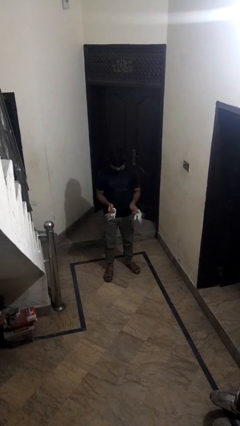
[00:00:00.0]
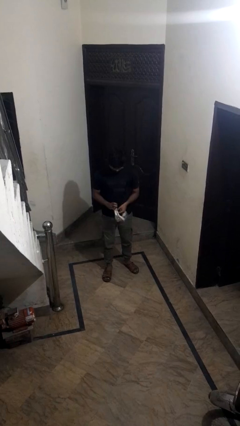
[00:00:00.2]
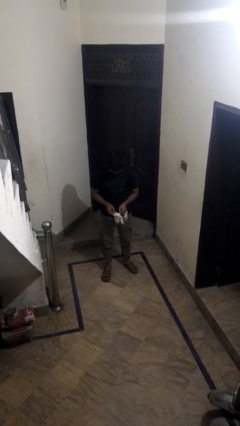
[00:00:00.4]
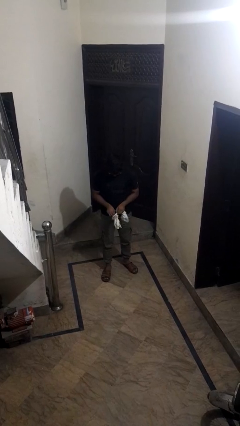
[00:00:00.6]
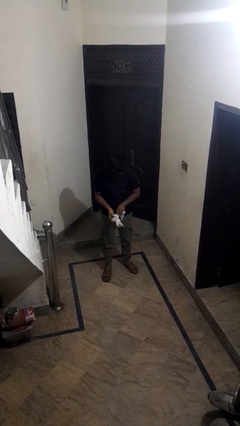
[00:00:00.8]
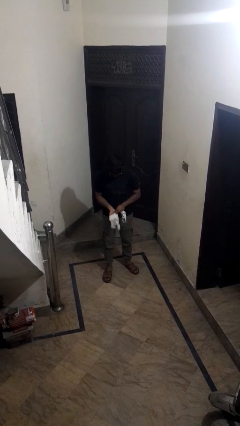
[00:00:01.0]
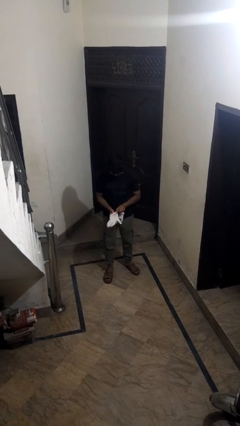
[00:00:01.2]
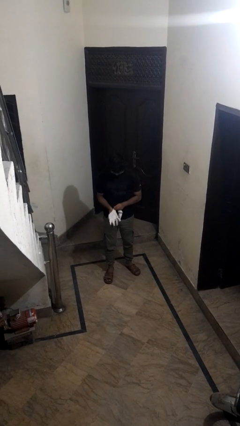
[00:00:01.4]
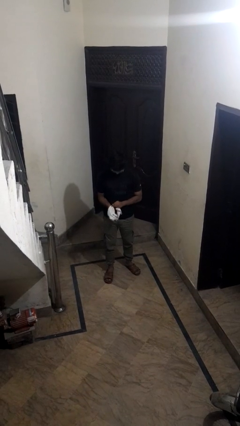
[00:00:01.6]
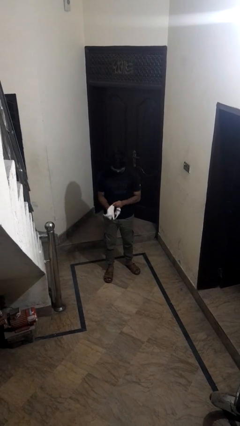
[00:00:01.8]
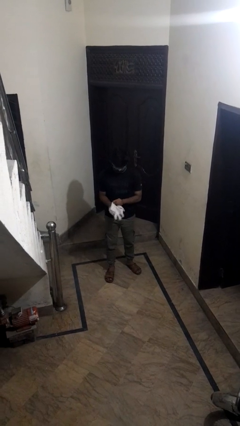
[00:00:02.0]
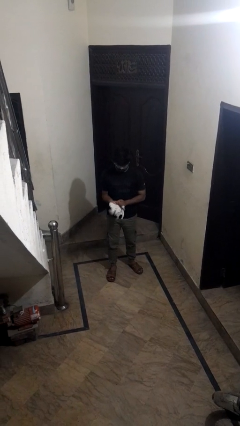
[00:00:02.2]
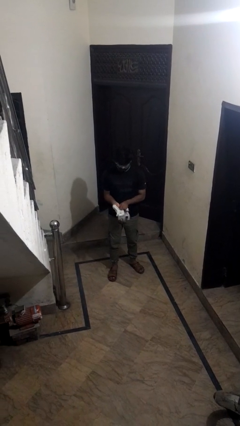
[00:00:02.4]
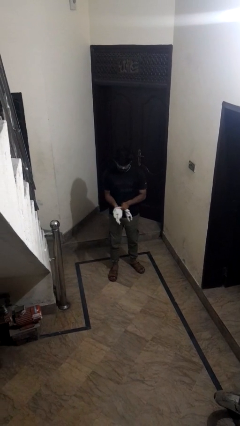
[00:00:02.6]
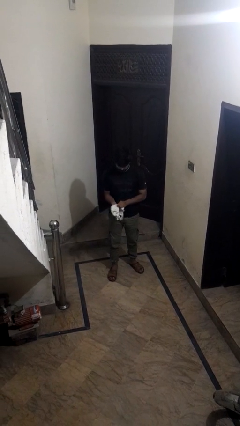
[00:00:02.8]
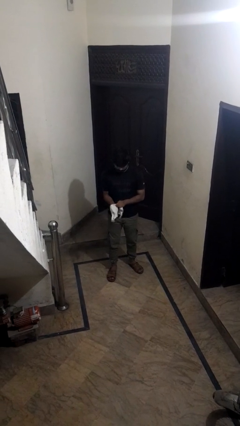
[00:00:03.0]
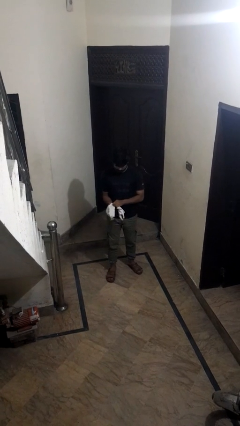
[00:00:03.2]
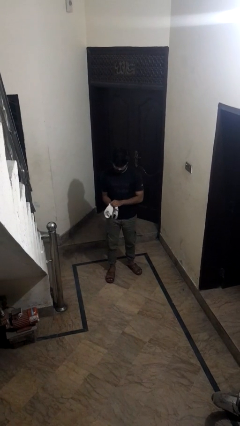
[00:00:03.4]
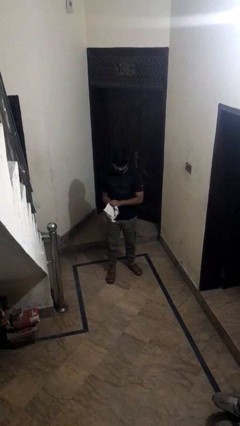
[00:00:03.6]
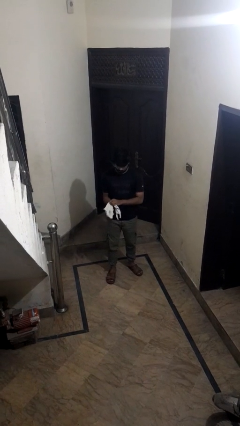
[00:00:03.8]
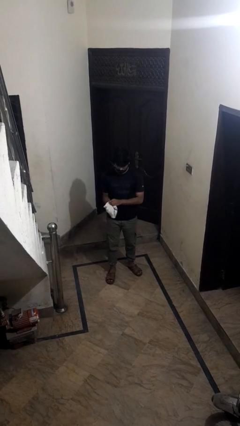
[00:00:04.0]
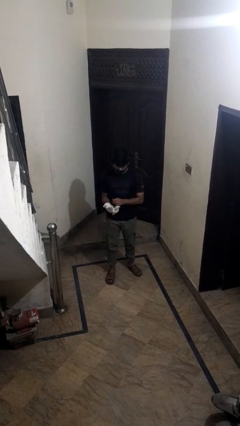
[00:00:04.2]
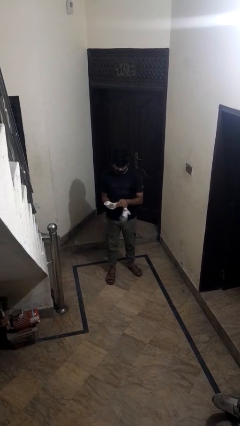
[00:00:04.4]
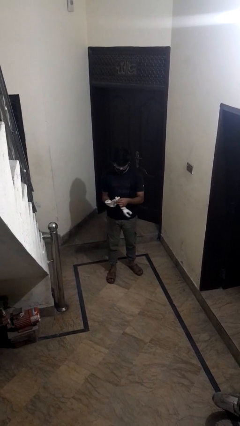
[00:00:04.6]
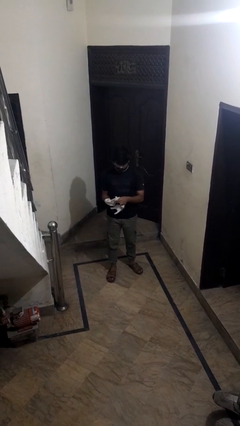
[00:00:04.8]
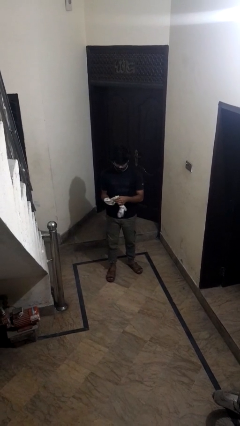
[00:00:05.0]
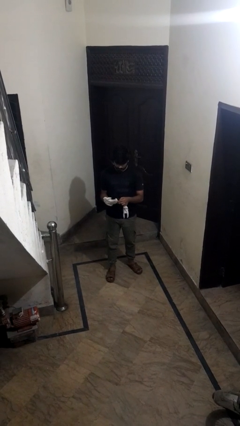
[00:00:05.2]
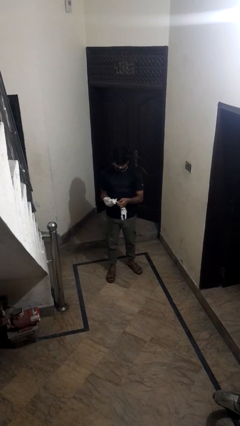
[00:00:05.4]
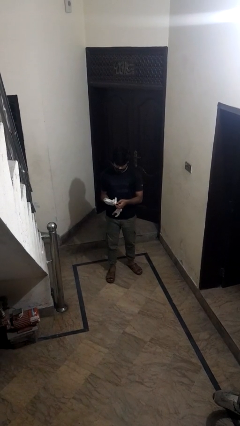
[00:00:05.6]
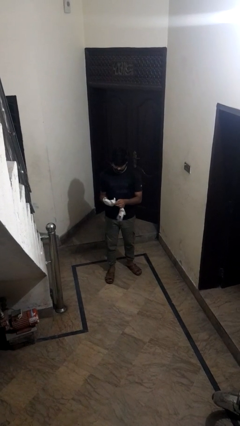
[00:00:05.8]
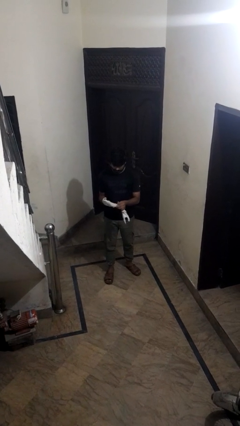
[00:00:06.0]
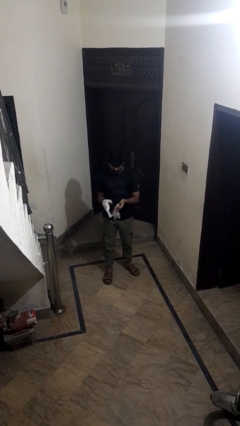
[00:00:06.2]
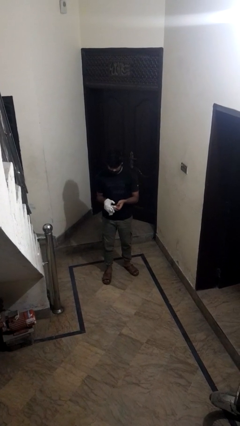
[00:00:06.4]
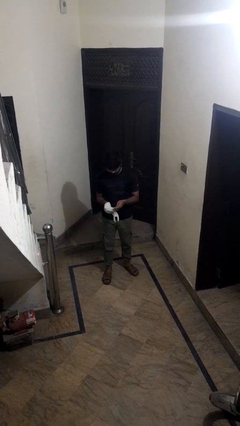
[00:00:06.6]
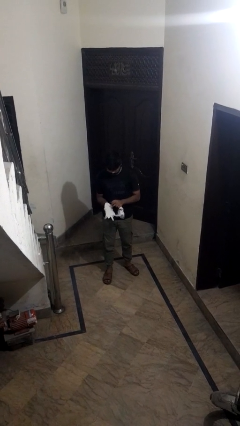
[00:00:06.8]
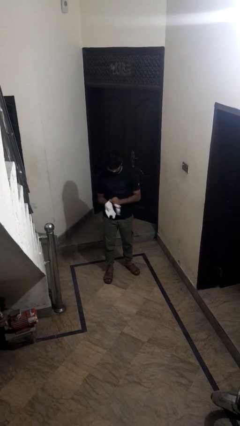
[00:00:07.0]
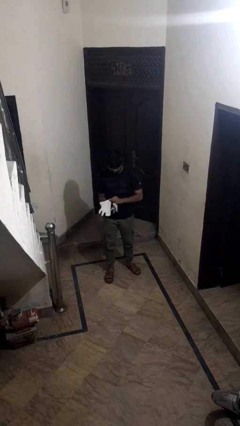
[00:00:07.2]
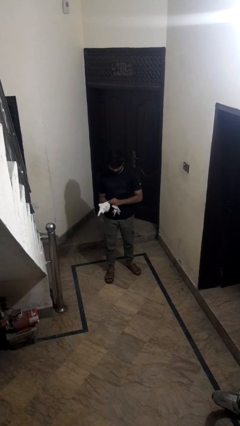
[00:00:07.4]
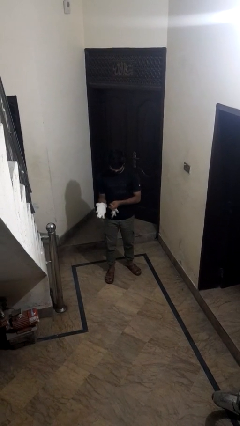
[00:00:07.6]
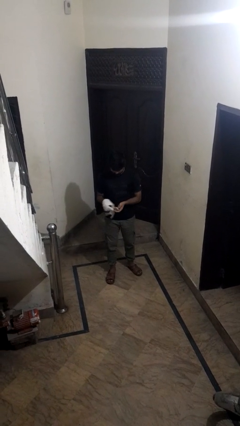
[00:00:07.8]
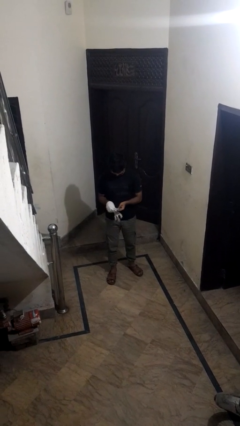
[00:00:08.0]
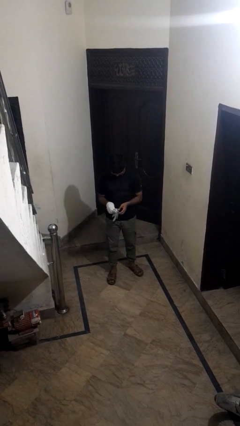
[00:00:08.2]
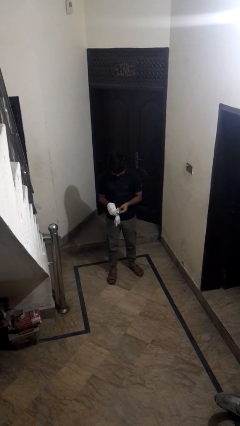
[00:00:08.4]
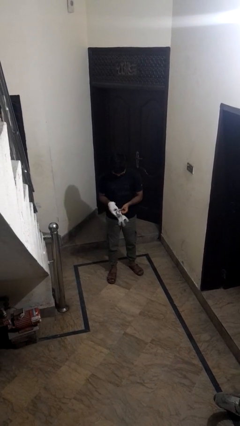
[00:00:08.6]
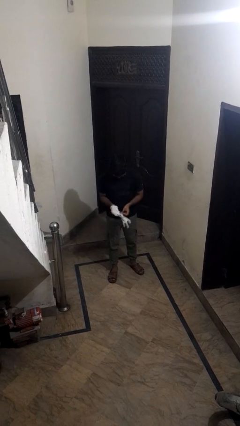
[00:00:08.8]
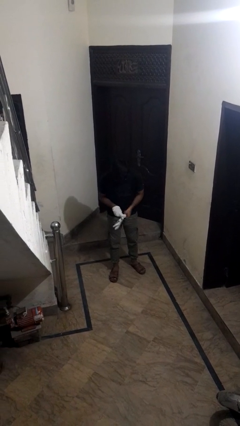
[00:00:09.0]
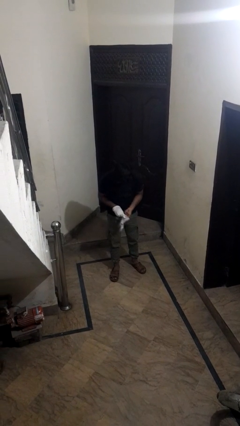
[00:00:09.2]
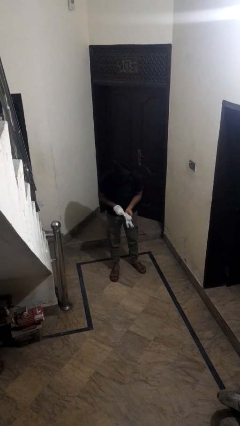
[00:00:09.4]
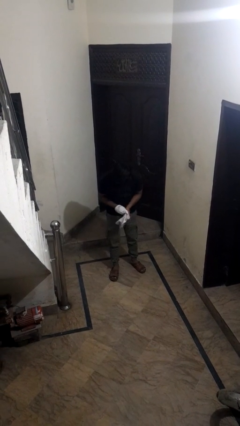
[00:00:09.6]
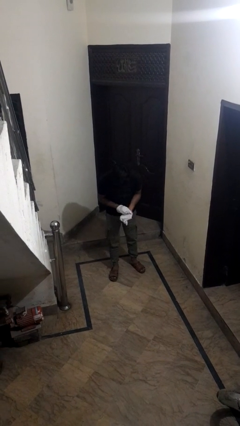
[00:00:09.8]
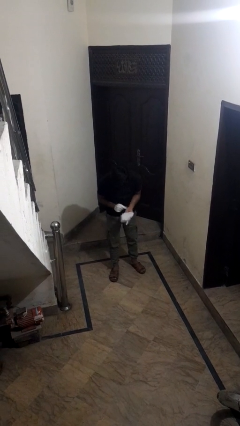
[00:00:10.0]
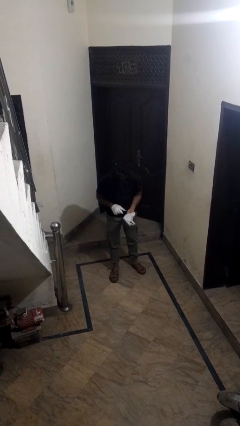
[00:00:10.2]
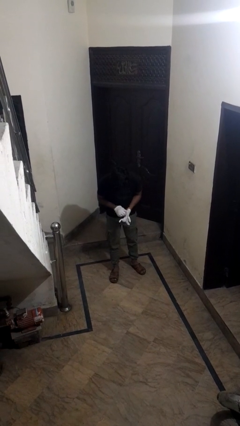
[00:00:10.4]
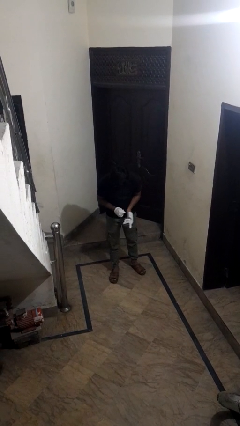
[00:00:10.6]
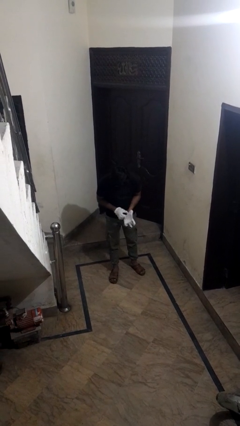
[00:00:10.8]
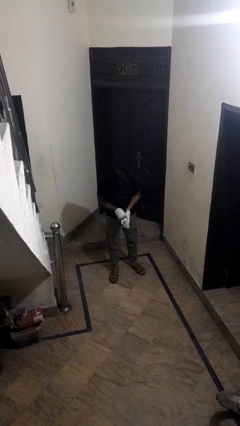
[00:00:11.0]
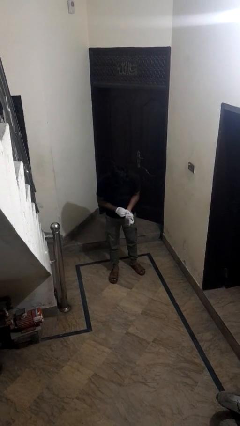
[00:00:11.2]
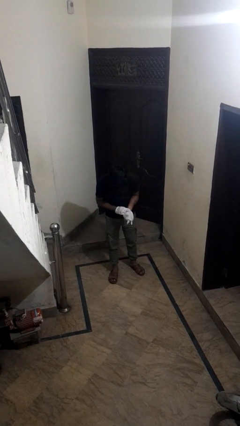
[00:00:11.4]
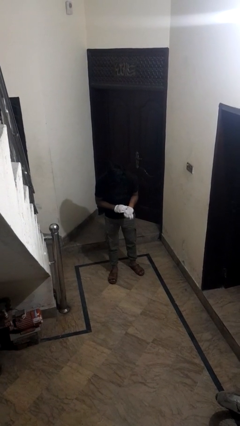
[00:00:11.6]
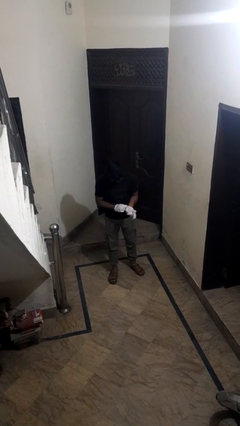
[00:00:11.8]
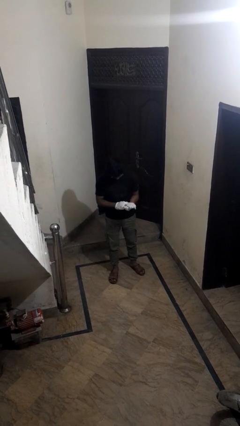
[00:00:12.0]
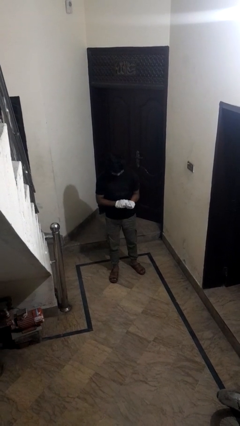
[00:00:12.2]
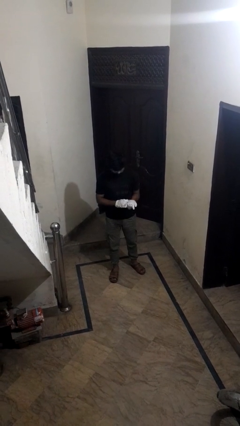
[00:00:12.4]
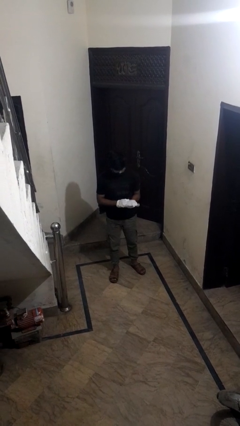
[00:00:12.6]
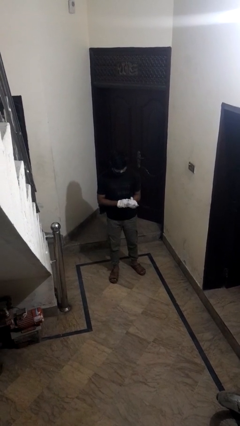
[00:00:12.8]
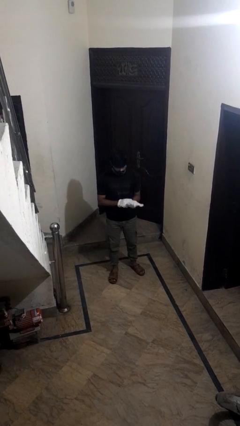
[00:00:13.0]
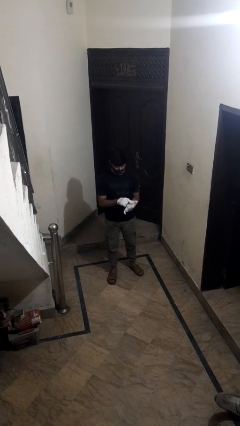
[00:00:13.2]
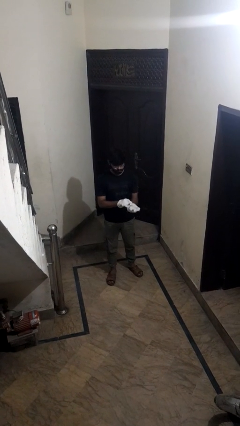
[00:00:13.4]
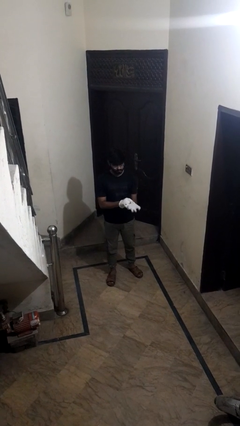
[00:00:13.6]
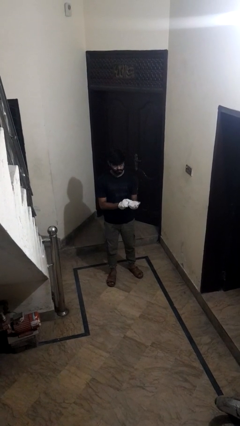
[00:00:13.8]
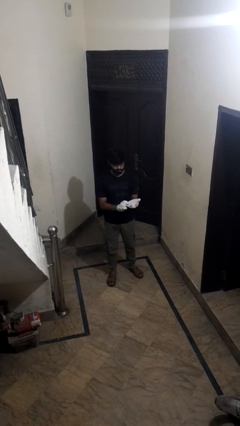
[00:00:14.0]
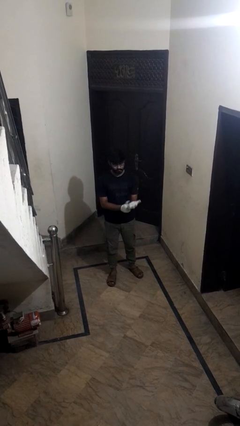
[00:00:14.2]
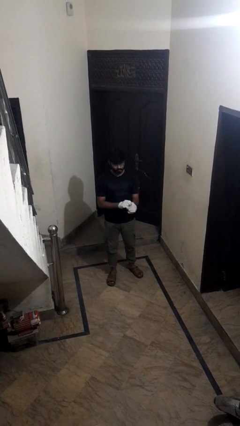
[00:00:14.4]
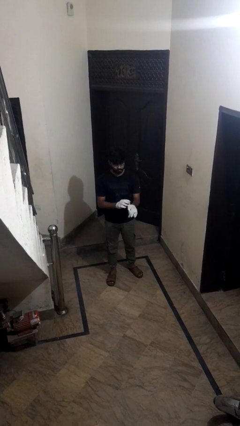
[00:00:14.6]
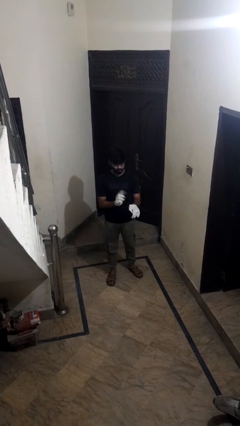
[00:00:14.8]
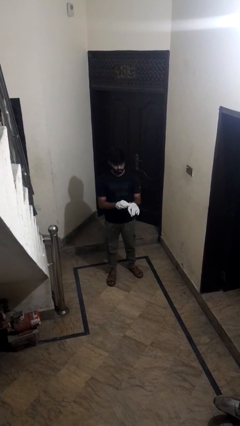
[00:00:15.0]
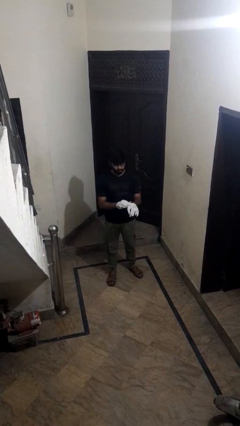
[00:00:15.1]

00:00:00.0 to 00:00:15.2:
person puts on gloves

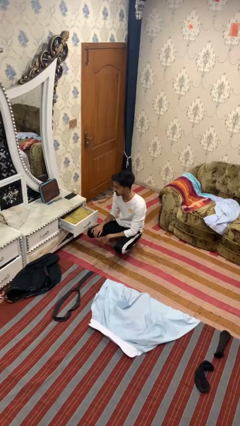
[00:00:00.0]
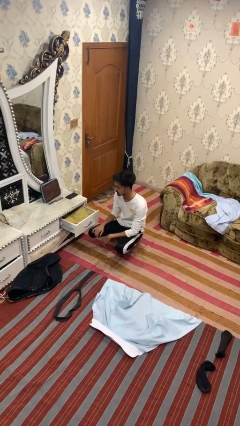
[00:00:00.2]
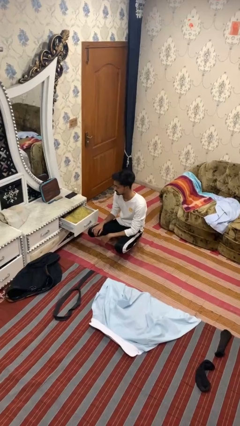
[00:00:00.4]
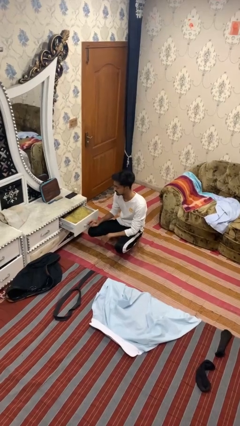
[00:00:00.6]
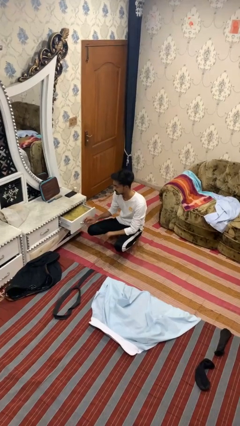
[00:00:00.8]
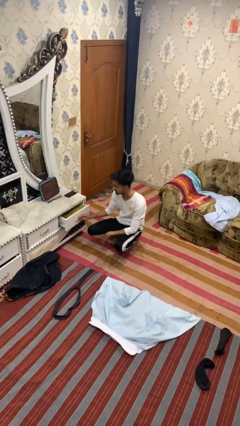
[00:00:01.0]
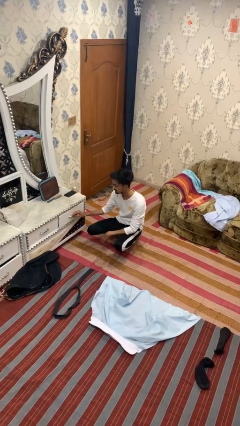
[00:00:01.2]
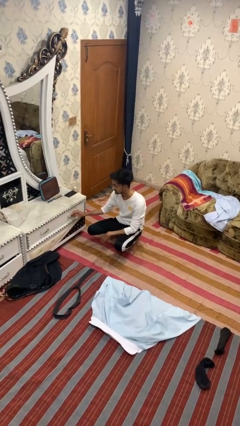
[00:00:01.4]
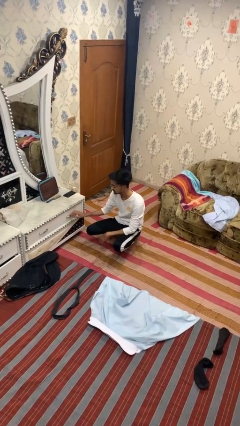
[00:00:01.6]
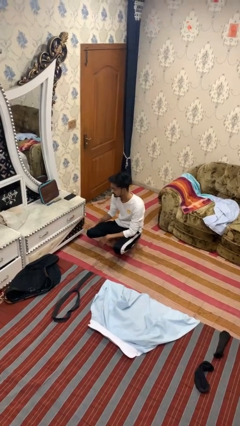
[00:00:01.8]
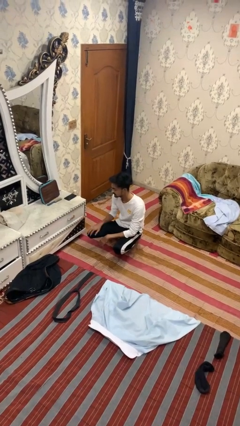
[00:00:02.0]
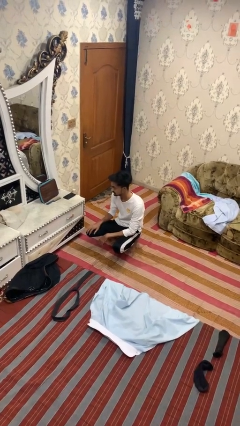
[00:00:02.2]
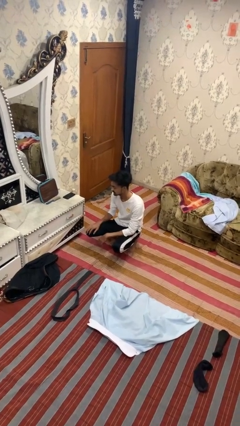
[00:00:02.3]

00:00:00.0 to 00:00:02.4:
person closes dresser drawer

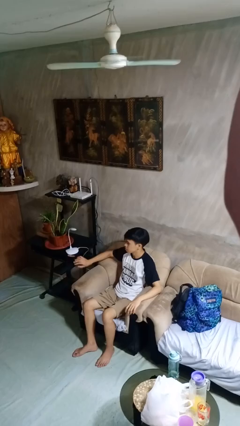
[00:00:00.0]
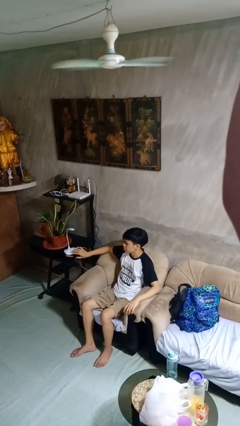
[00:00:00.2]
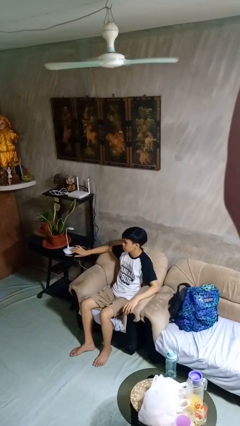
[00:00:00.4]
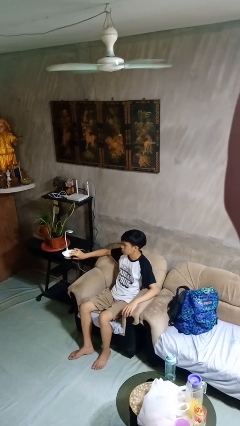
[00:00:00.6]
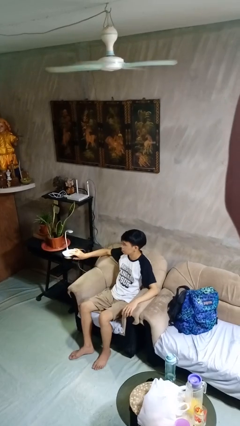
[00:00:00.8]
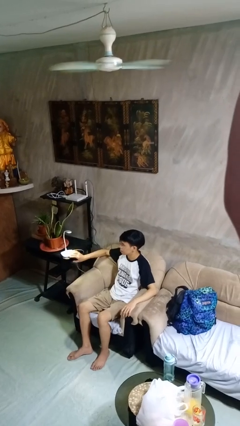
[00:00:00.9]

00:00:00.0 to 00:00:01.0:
person turns on lamp
